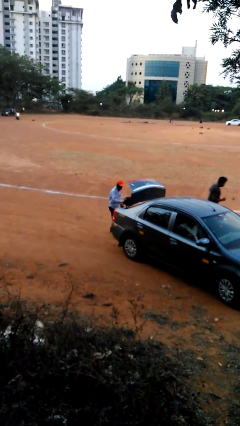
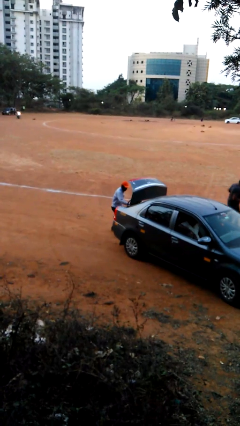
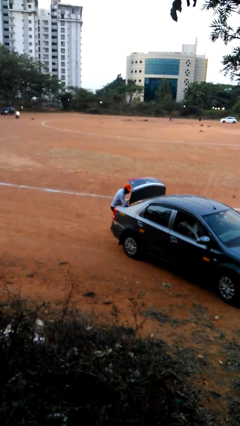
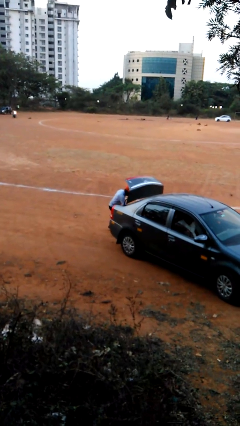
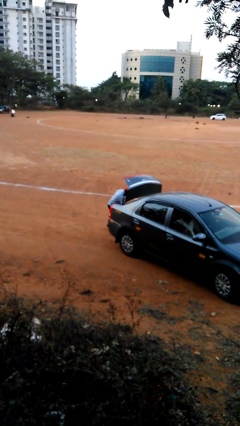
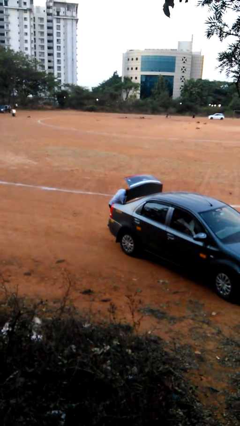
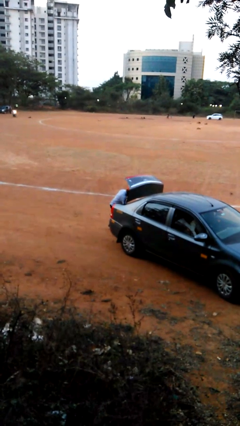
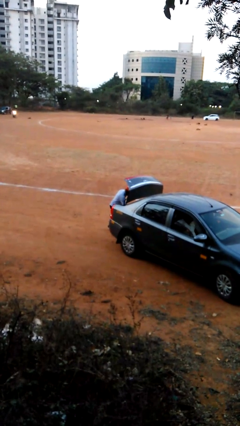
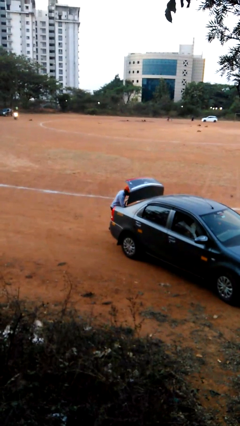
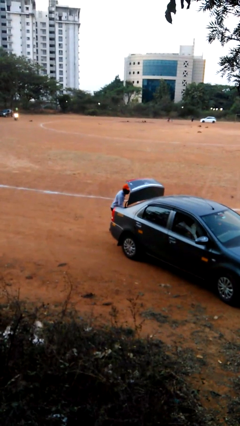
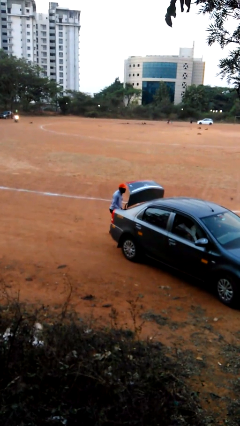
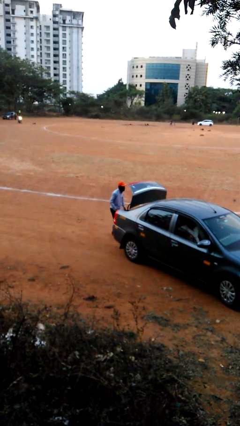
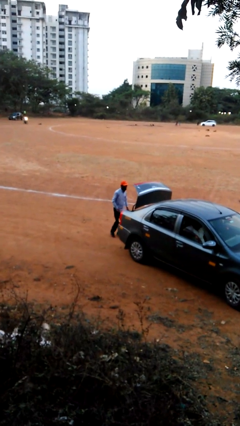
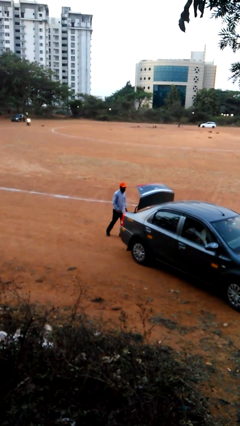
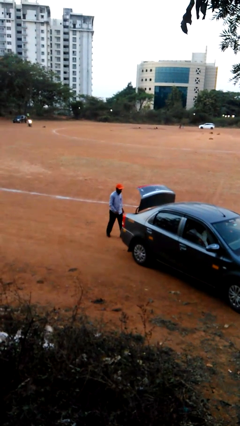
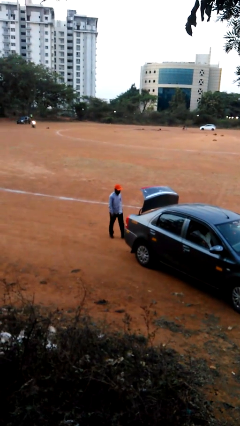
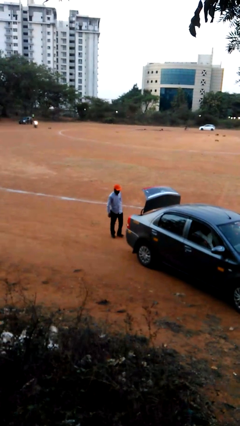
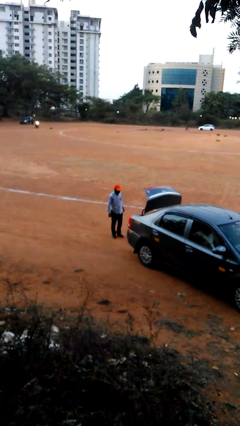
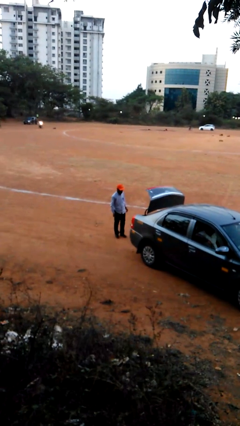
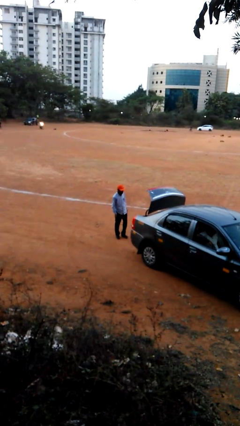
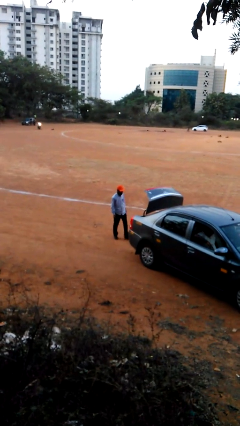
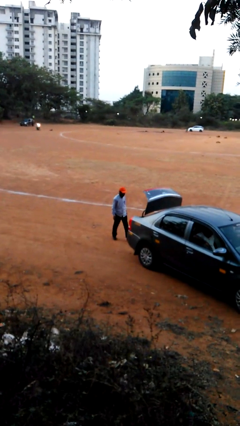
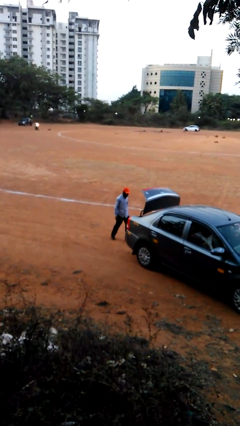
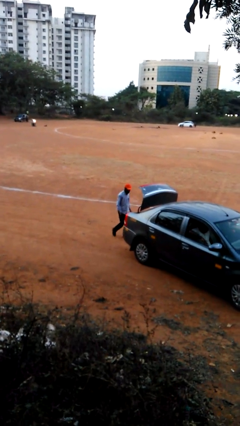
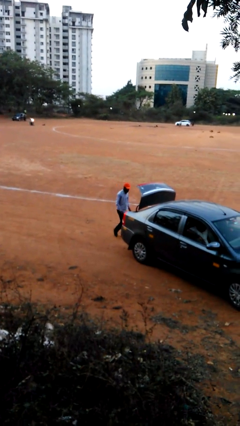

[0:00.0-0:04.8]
person loads car

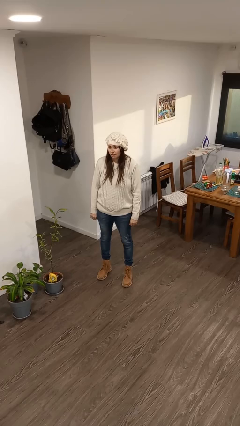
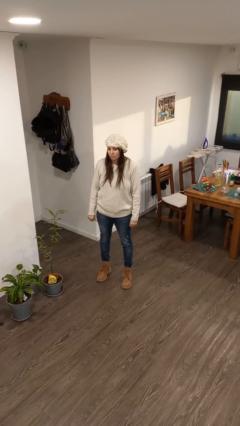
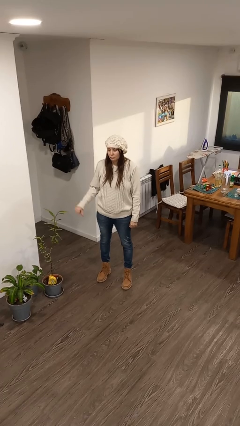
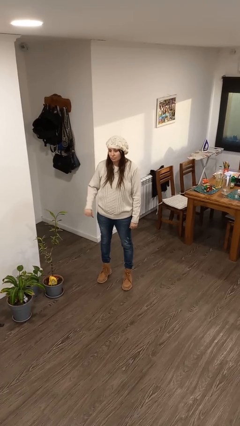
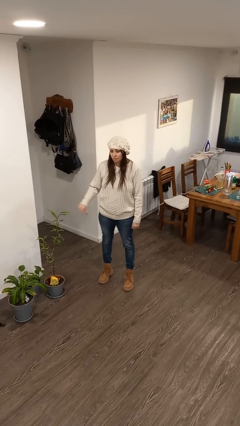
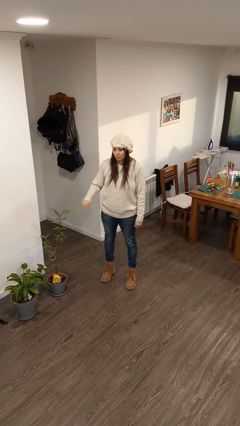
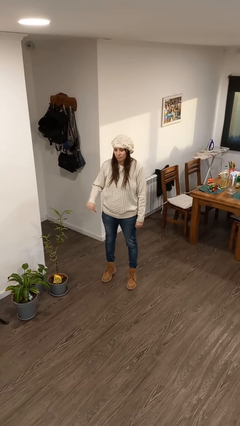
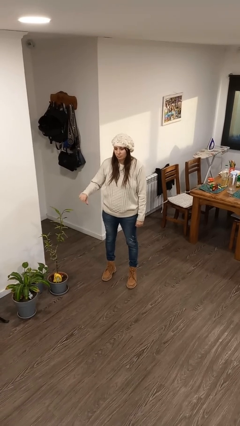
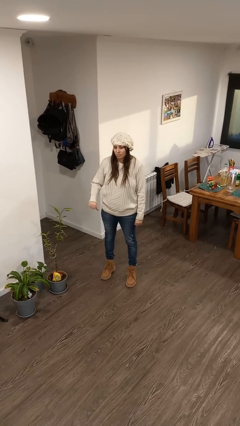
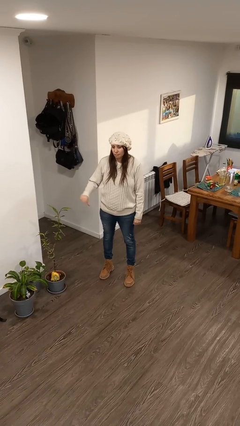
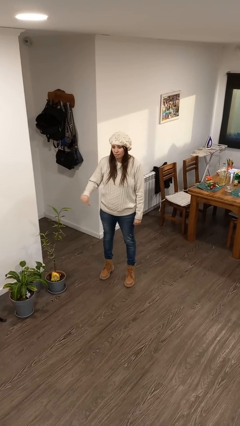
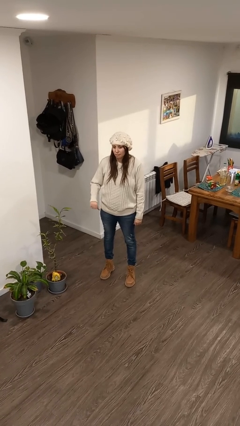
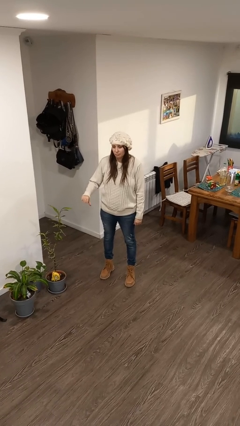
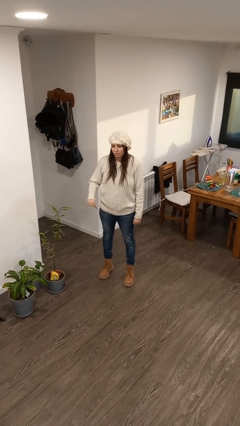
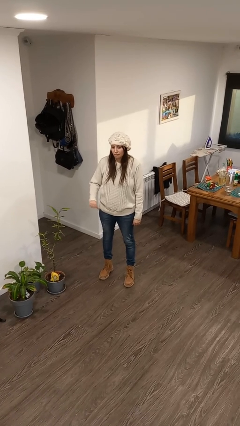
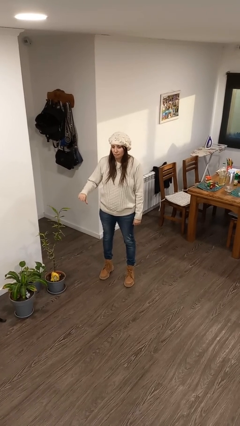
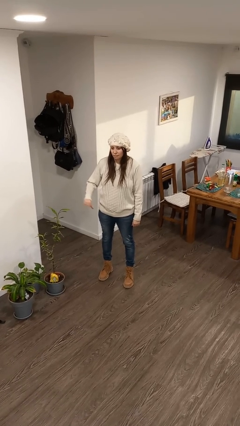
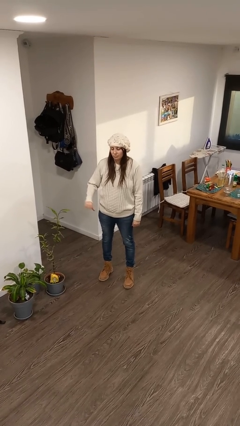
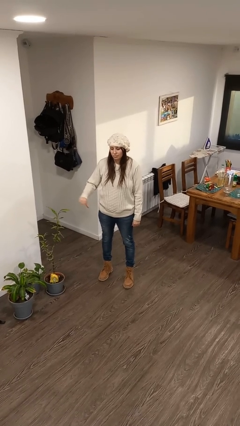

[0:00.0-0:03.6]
person gestures thumbs down

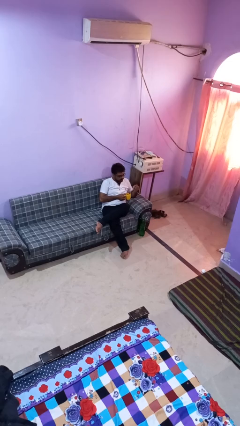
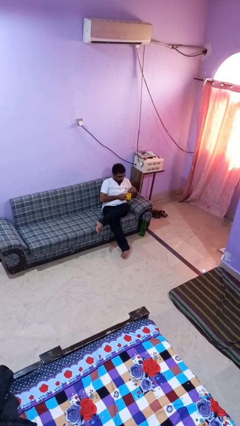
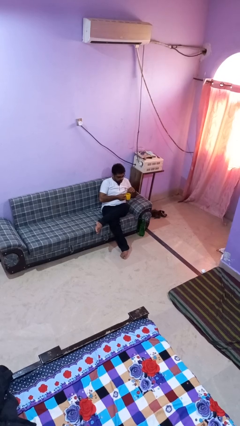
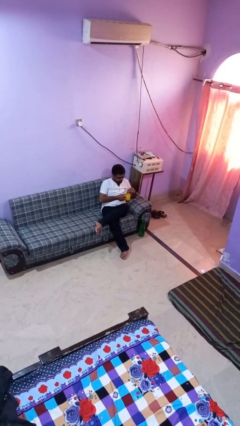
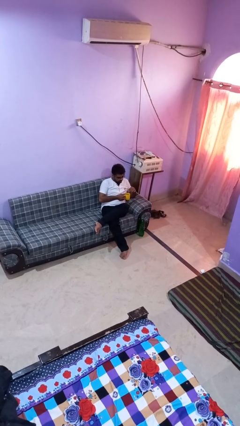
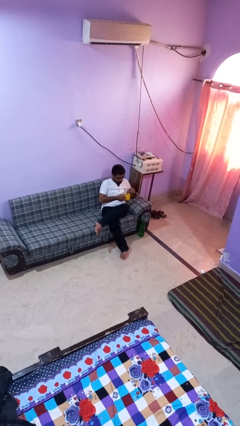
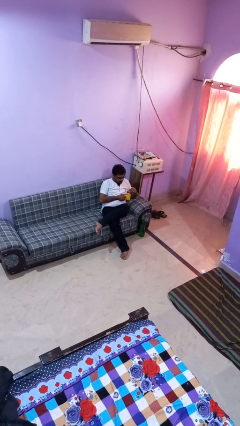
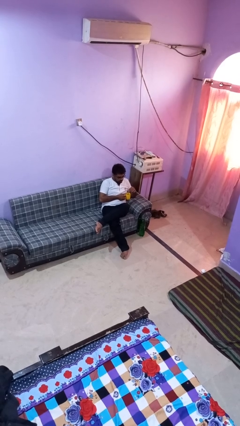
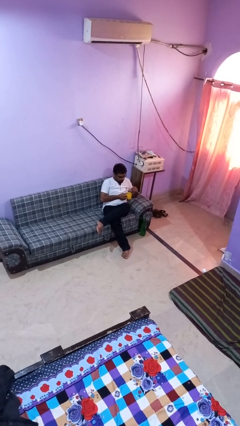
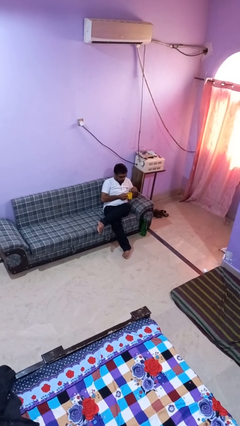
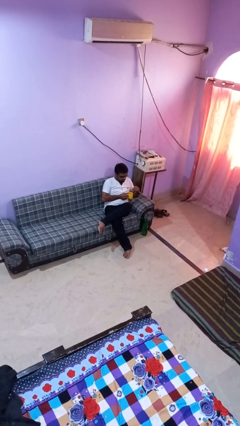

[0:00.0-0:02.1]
person stirs mug

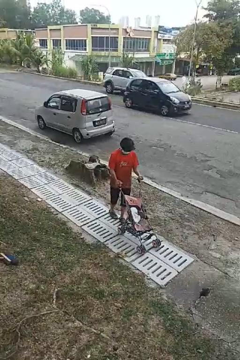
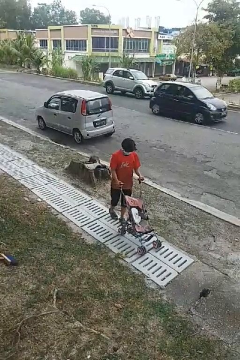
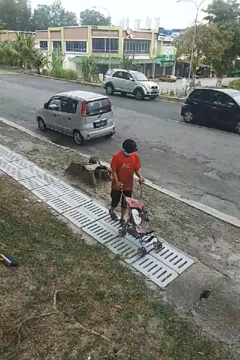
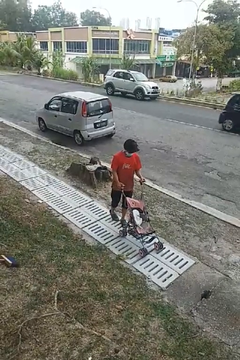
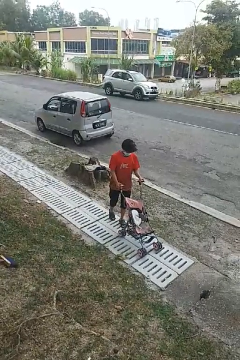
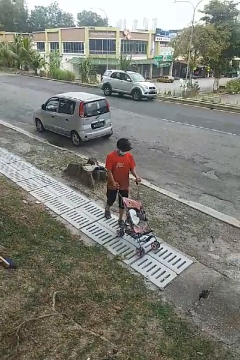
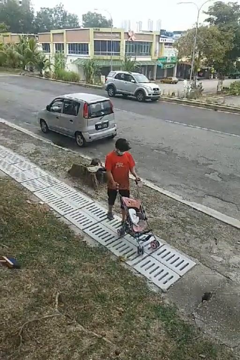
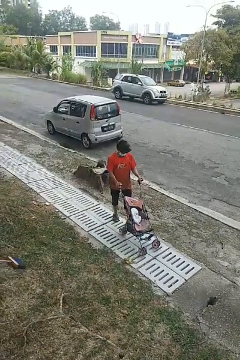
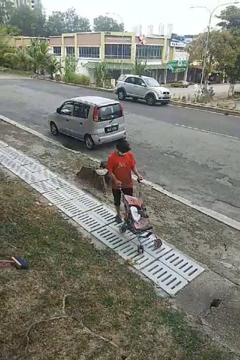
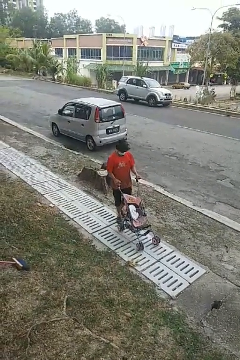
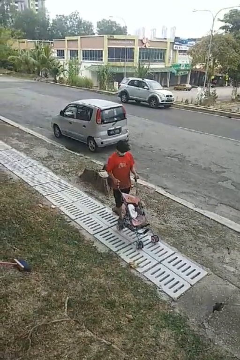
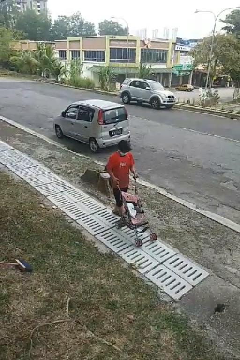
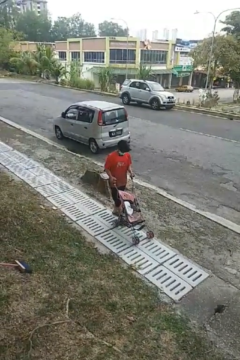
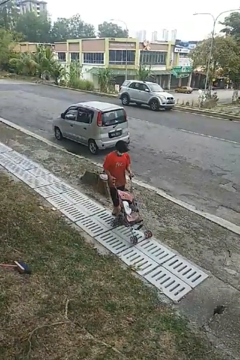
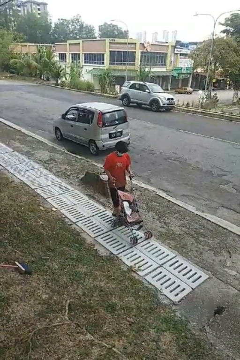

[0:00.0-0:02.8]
person pulls wheeled cart

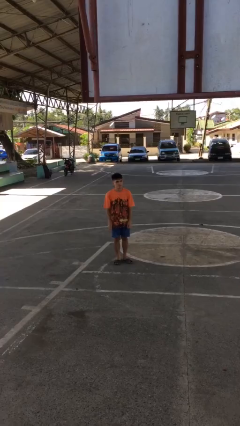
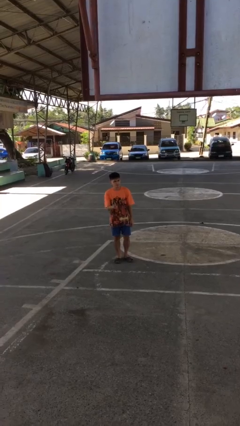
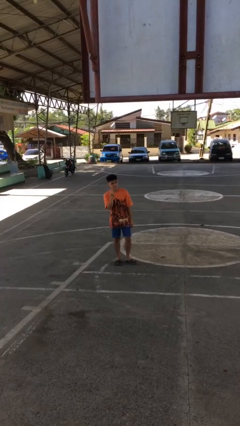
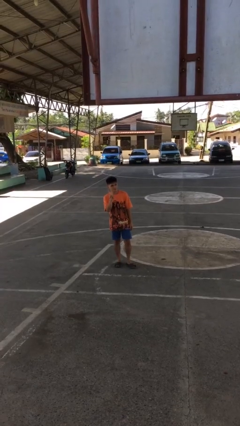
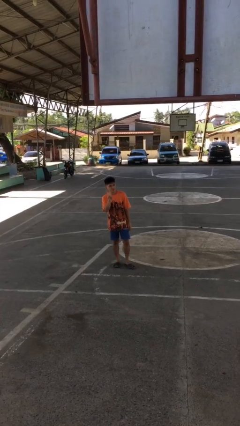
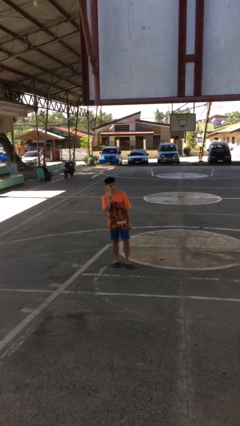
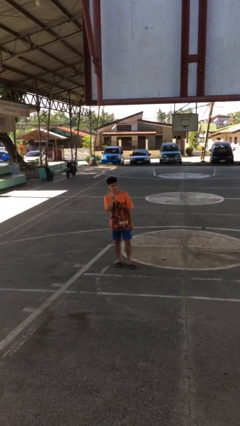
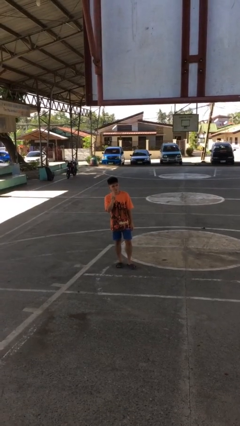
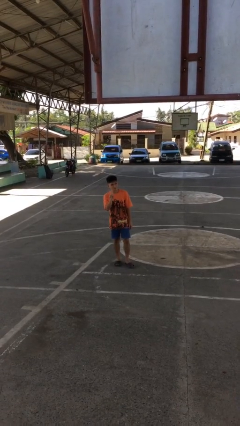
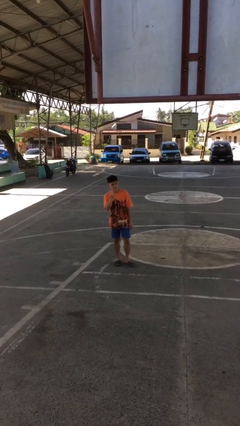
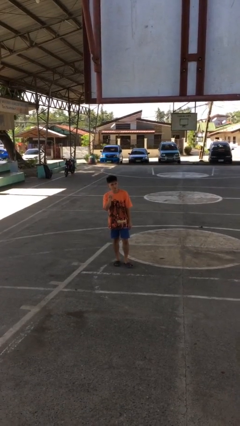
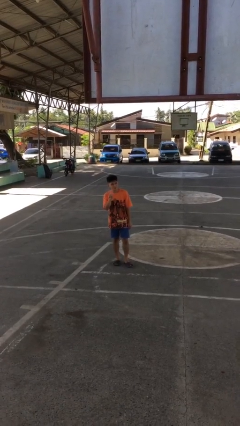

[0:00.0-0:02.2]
person gestures peace

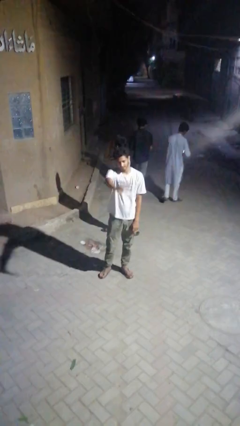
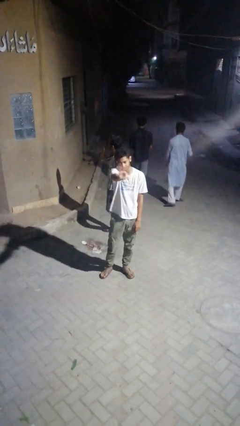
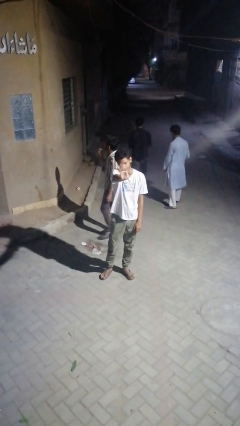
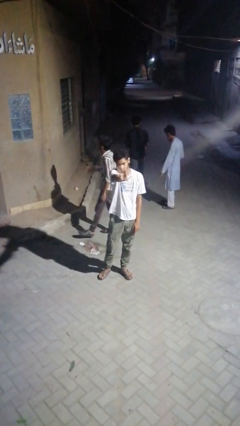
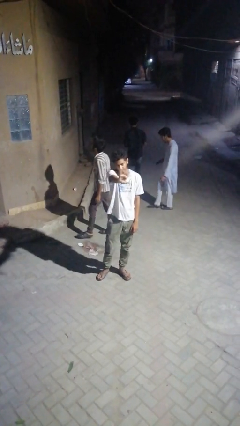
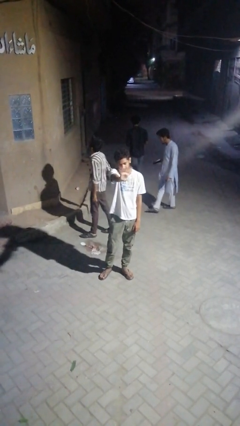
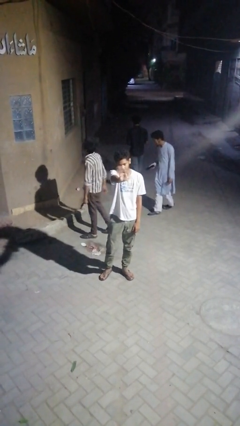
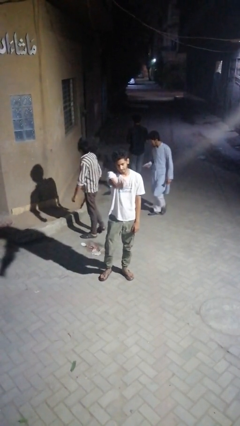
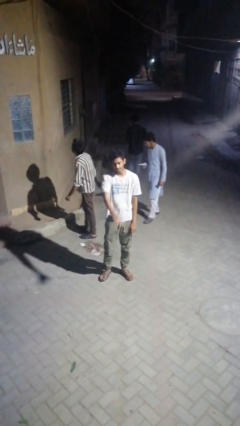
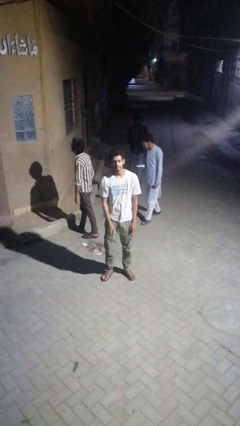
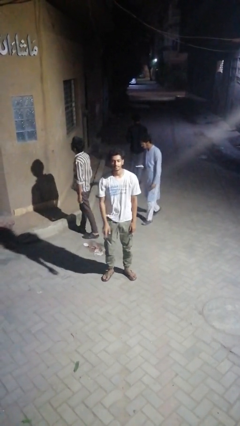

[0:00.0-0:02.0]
person waves at person

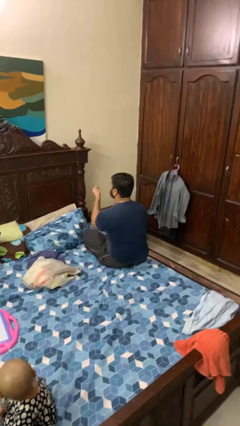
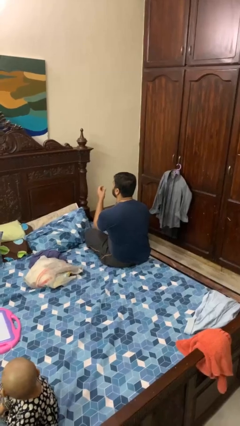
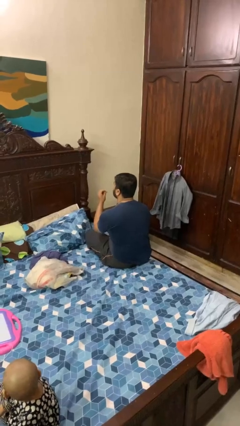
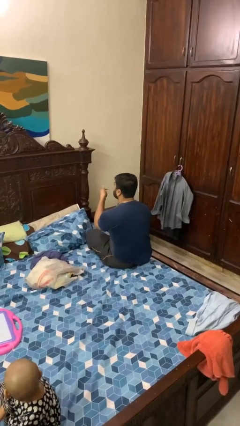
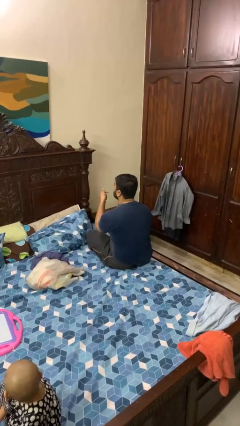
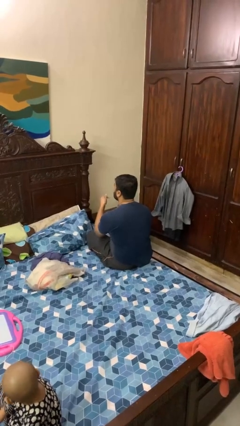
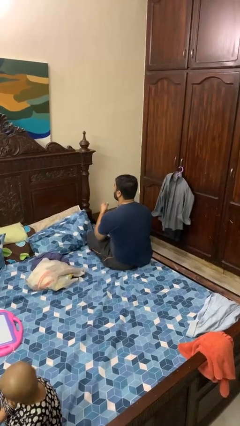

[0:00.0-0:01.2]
person snaps fingers
